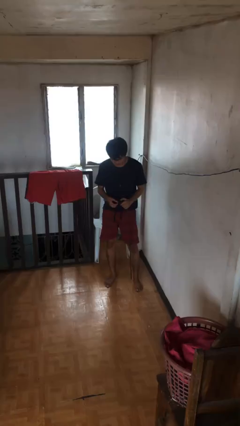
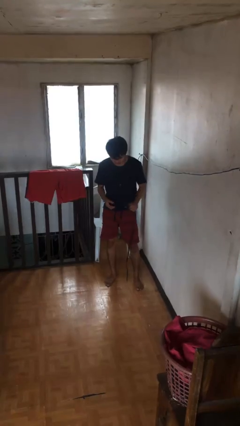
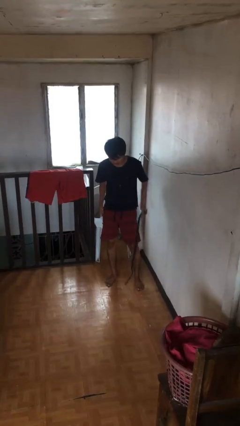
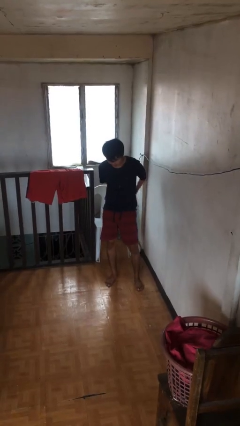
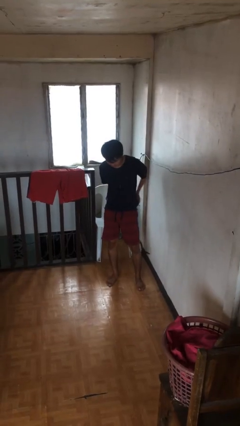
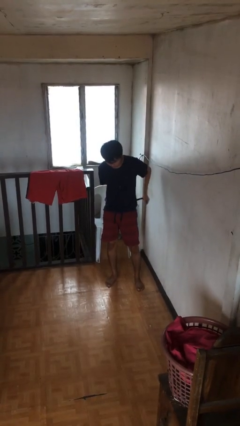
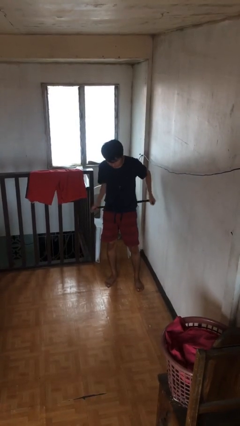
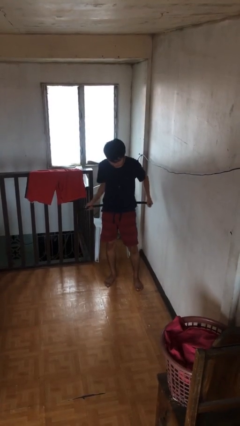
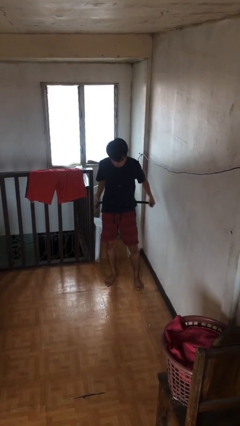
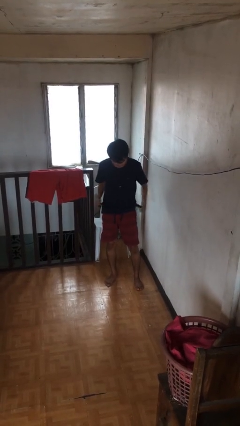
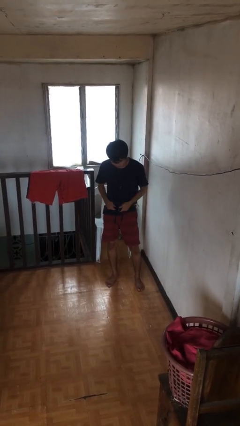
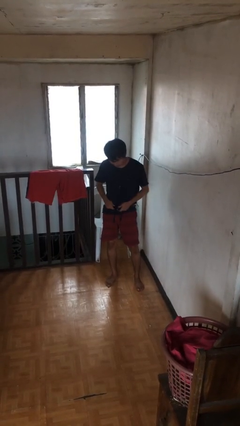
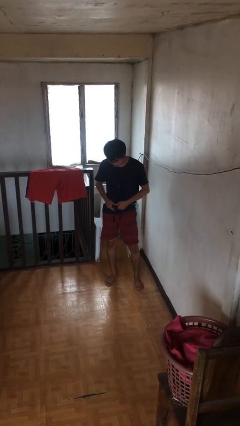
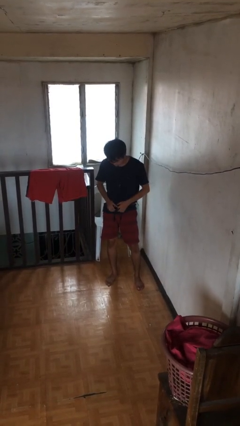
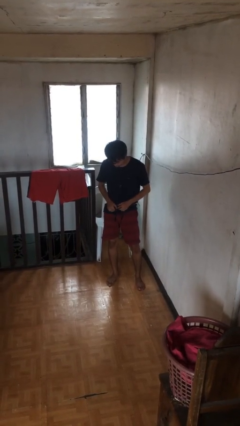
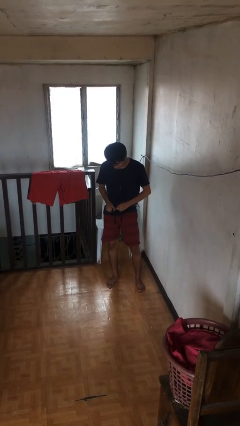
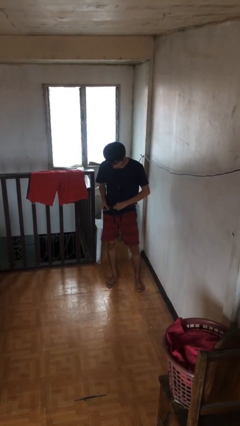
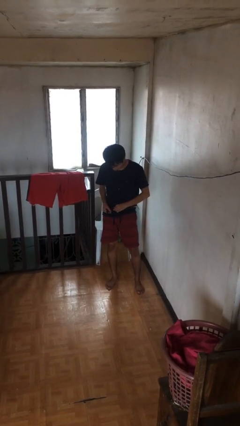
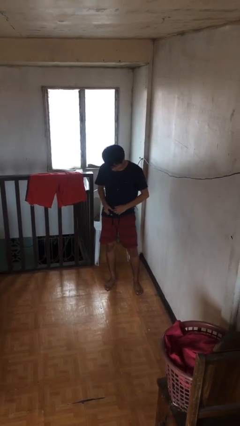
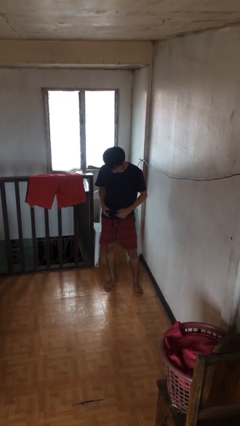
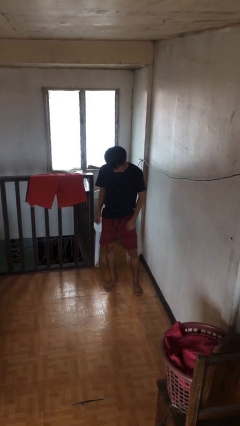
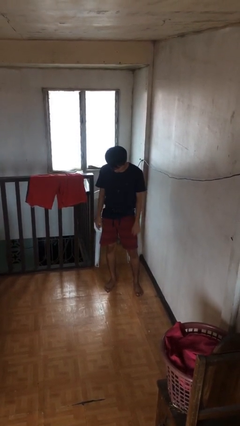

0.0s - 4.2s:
person puts on belt

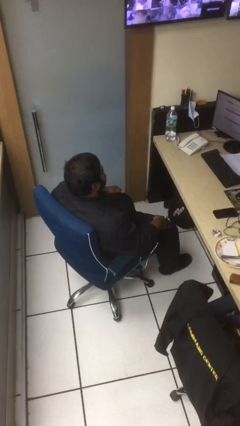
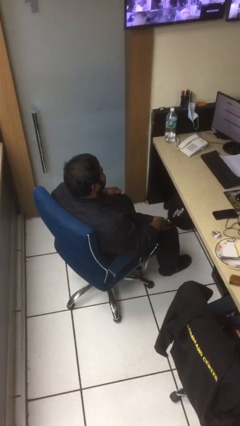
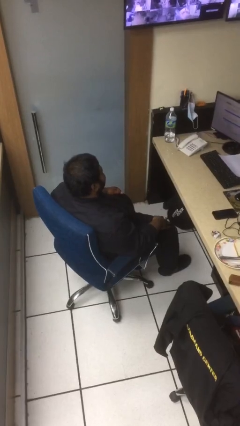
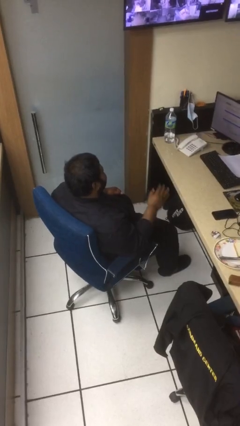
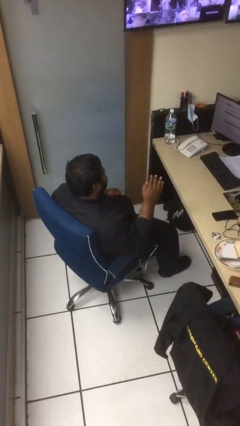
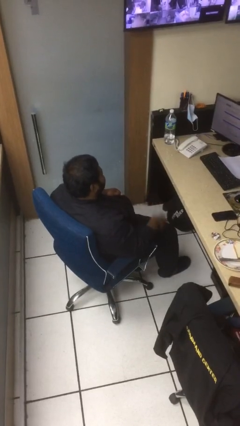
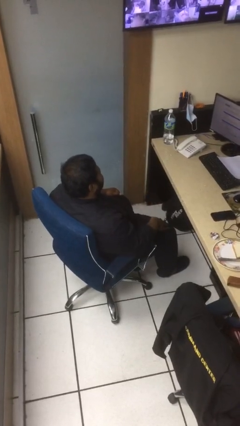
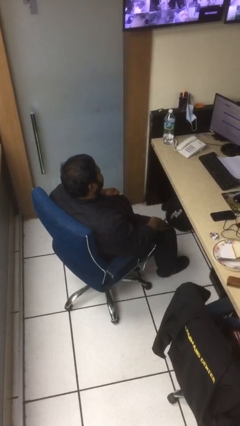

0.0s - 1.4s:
person slaps hands on thighs

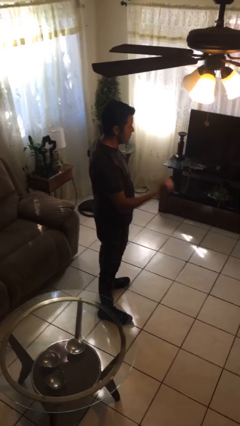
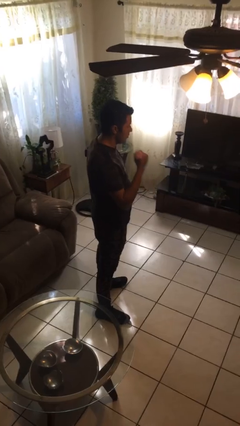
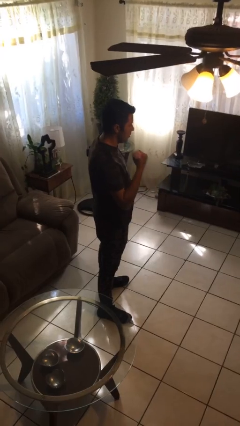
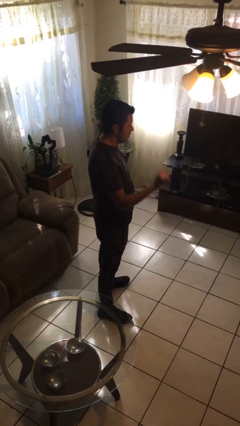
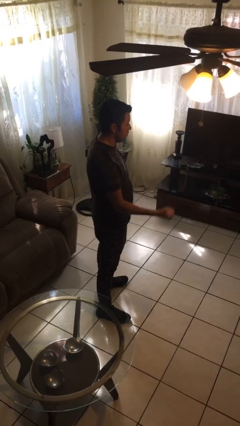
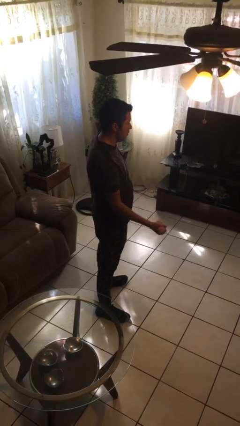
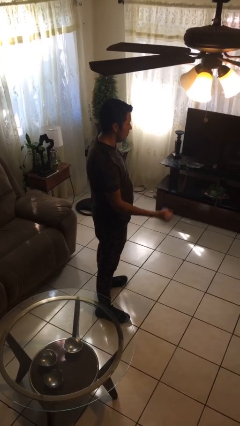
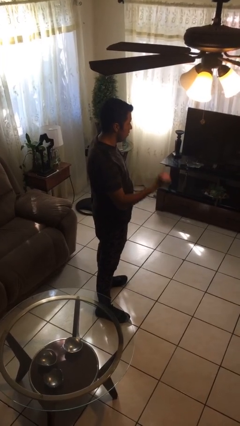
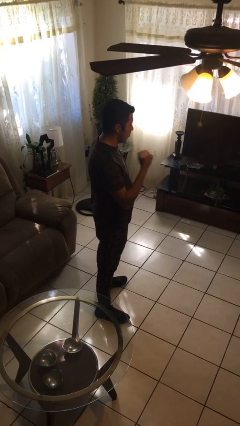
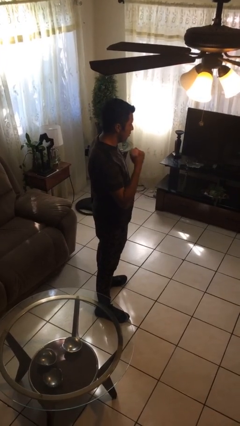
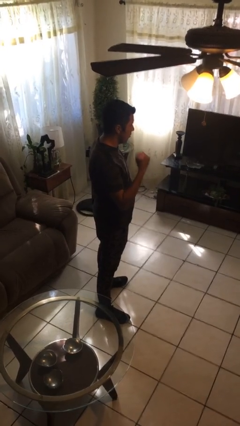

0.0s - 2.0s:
person lifts dumbbells

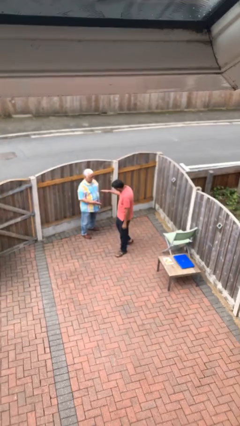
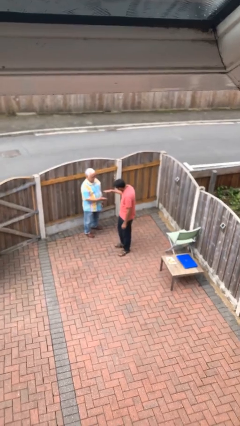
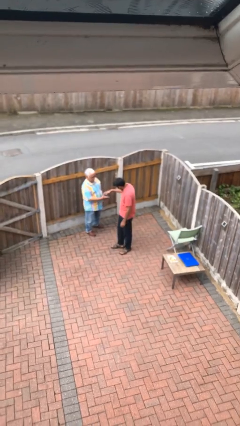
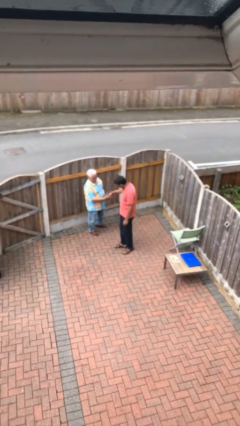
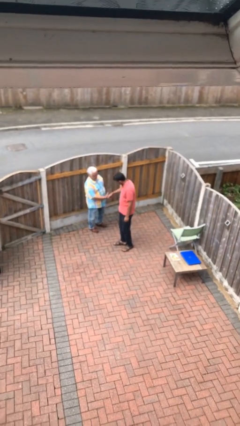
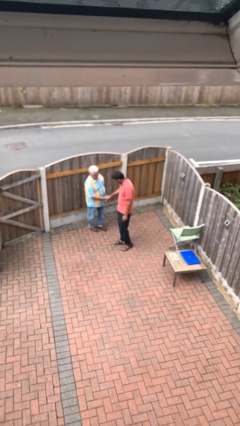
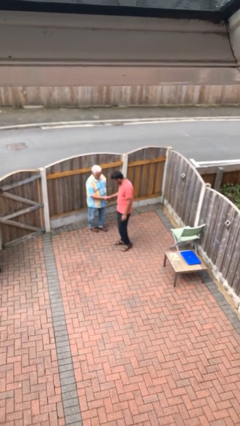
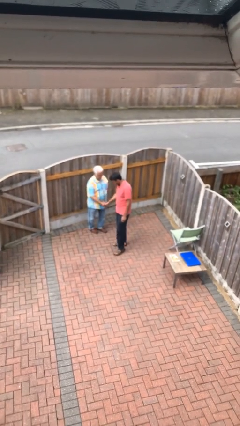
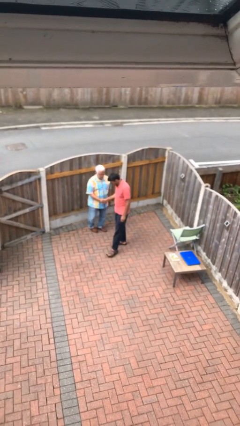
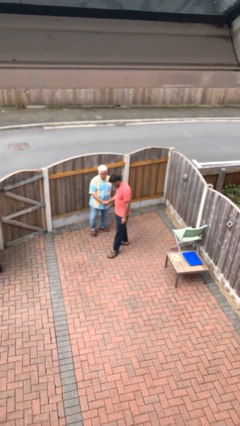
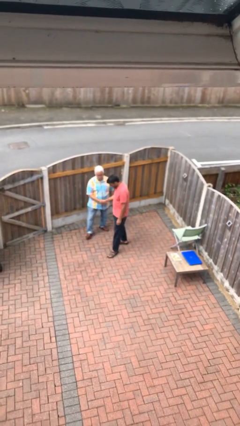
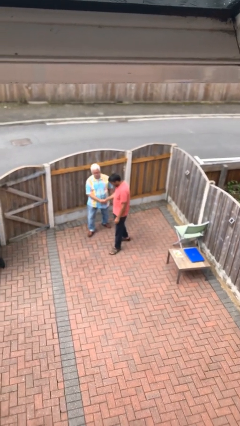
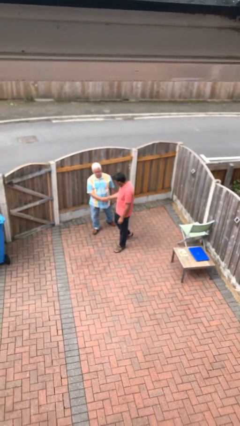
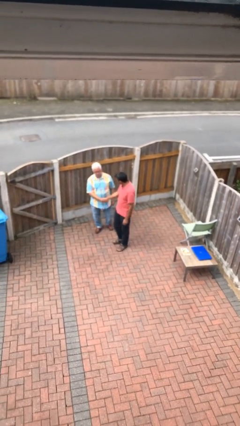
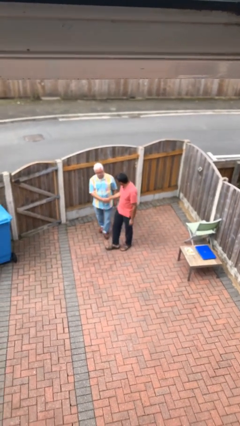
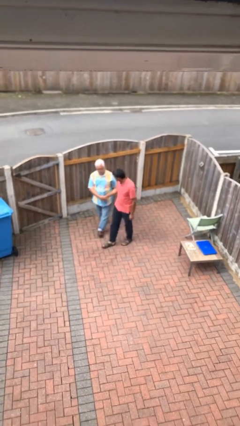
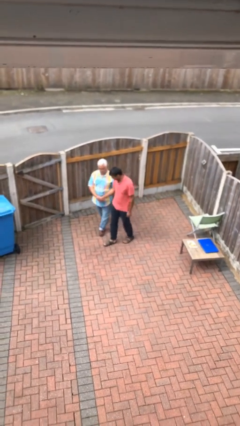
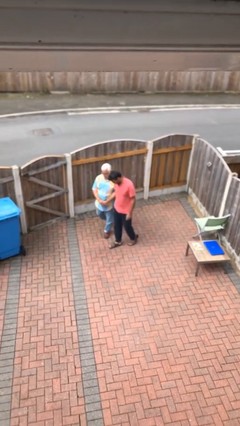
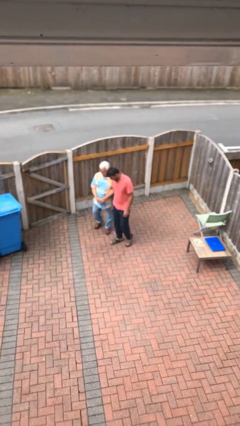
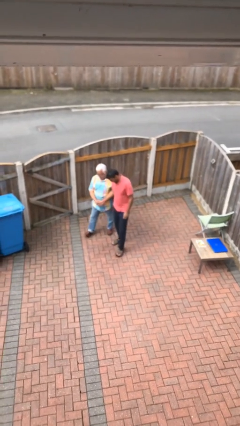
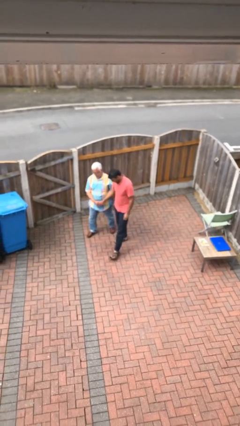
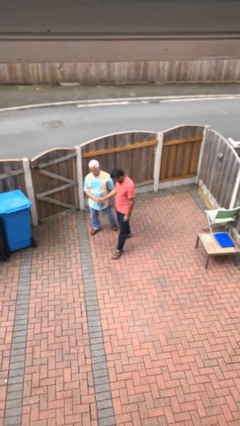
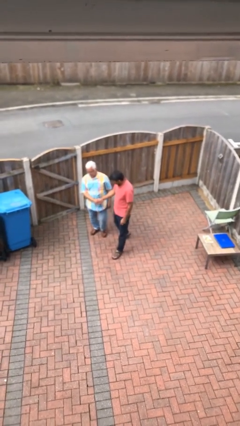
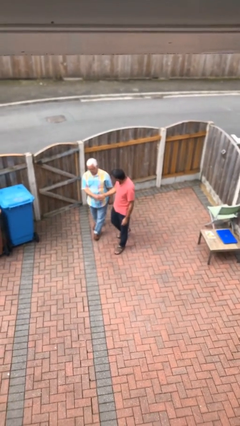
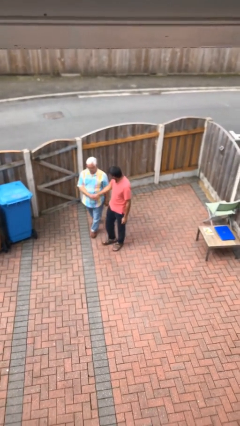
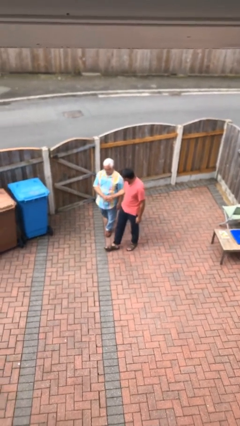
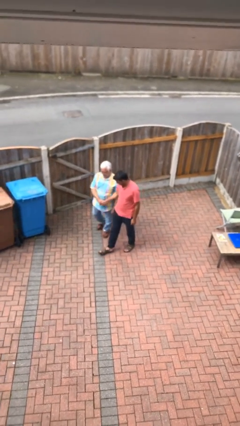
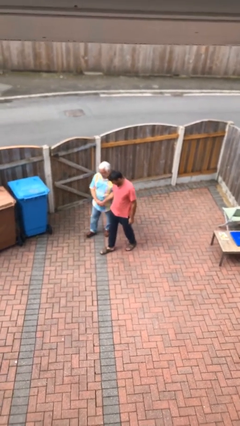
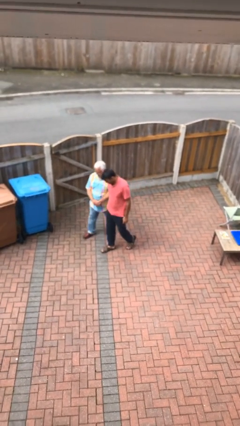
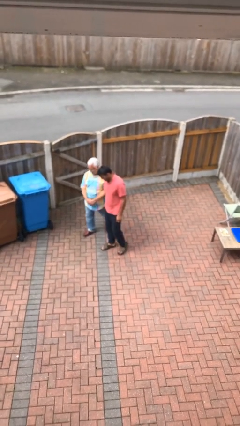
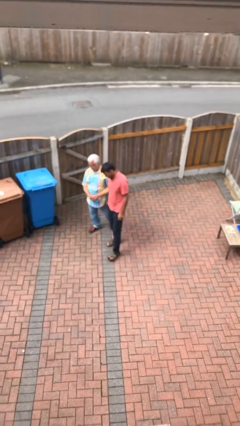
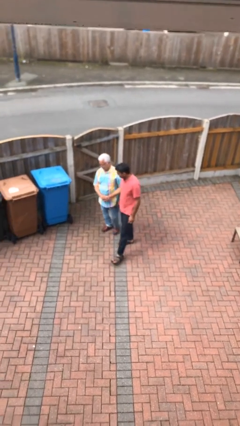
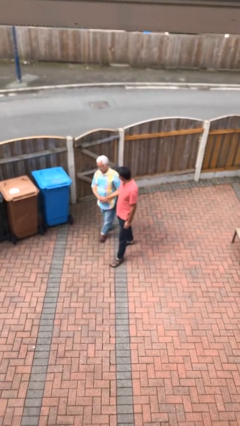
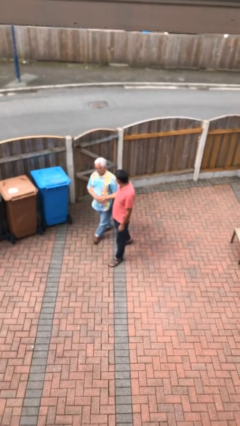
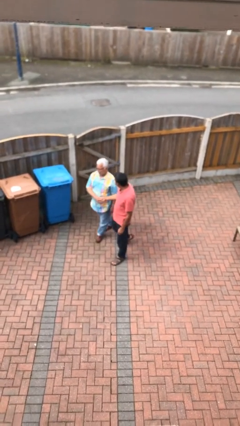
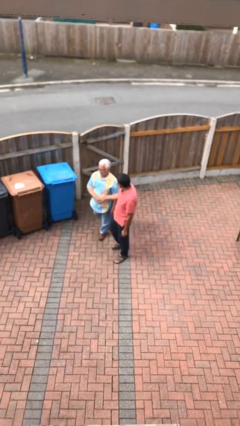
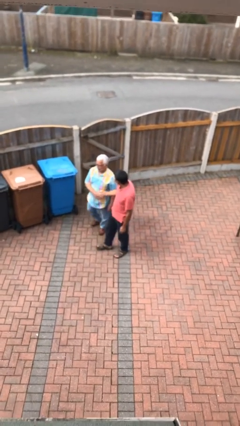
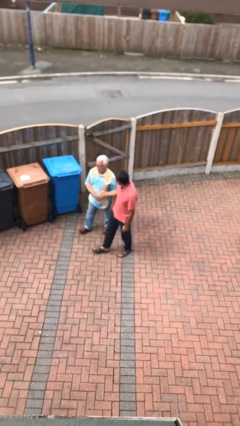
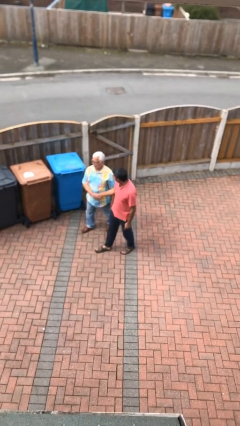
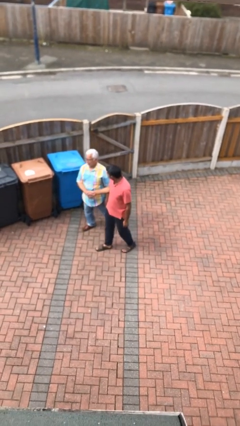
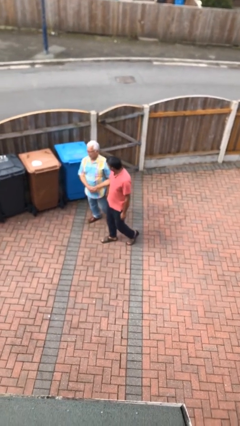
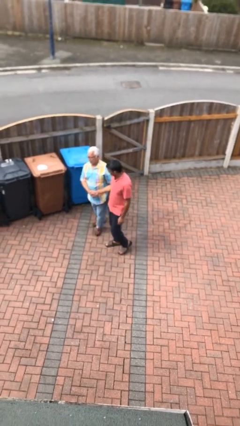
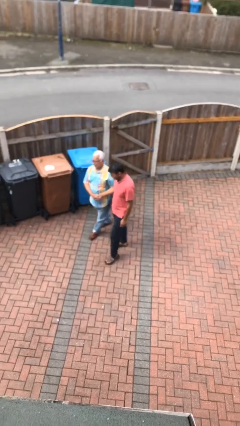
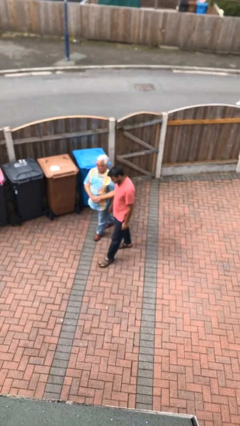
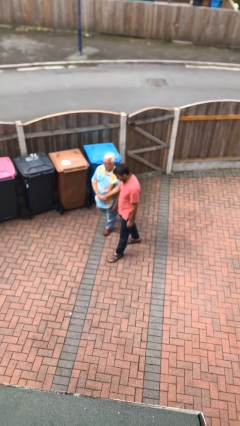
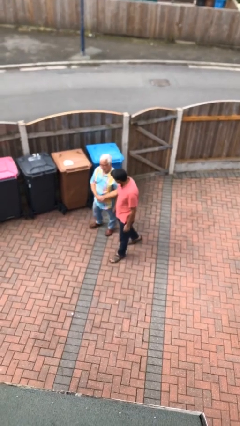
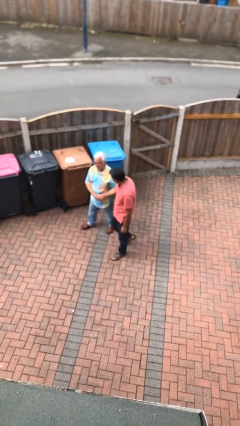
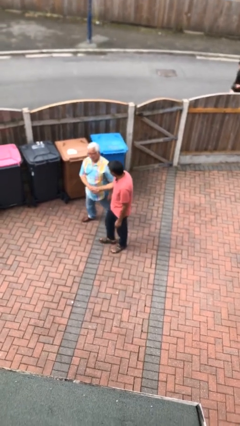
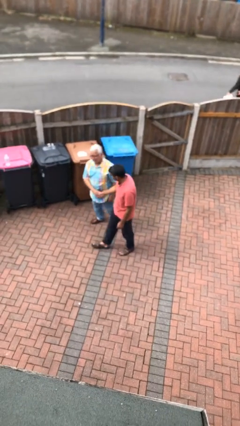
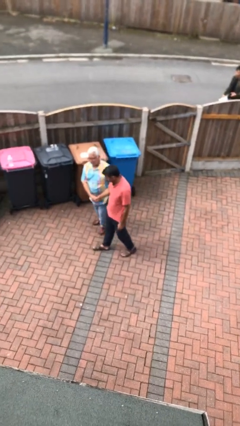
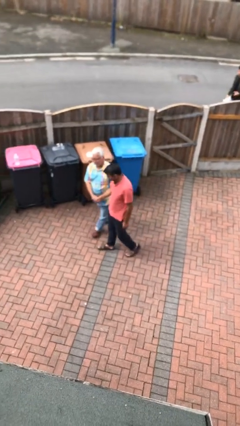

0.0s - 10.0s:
person holds hand
